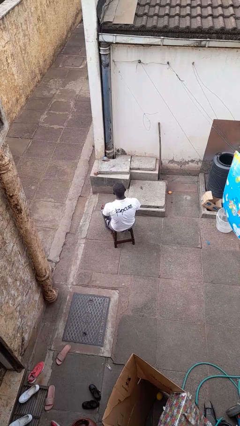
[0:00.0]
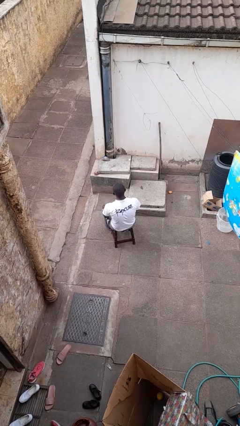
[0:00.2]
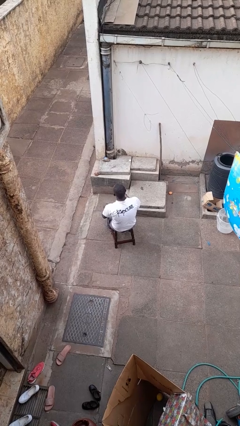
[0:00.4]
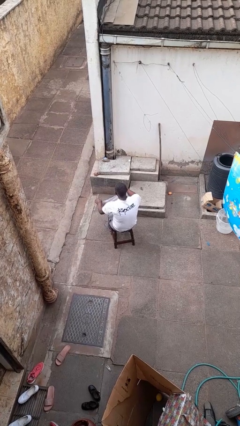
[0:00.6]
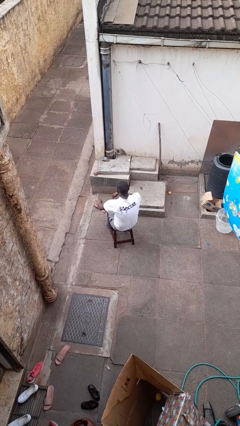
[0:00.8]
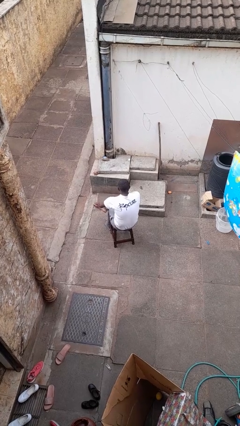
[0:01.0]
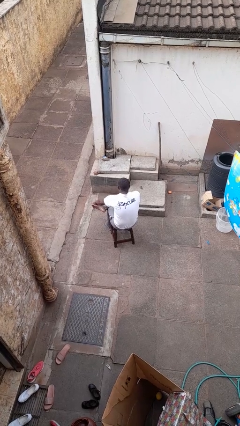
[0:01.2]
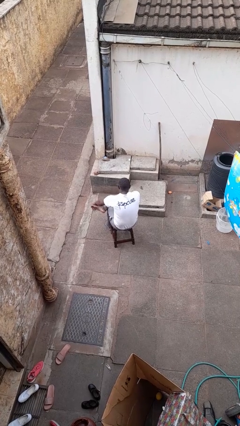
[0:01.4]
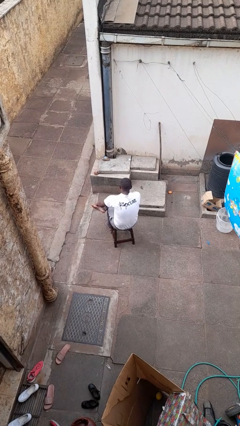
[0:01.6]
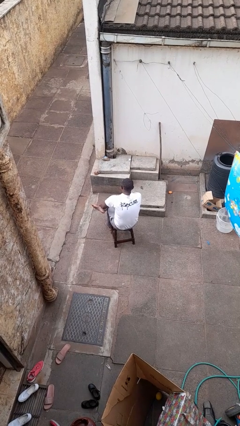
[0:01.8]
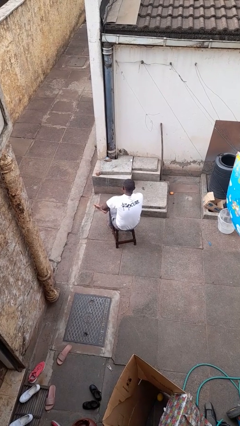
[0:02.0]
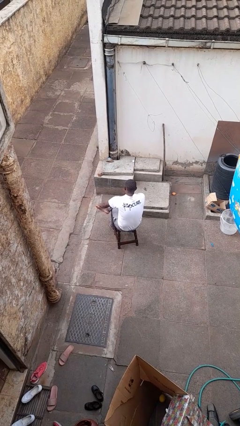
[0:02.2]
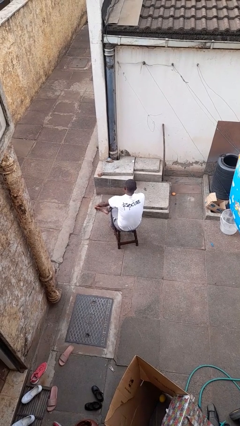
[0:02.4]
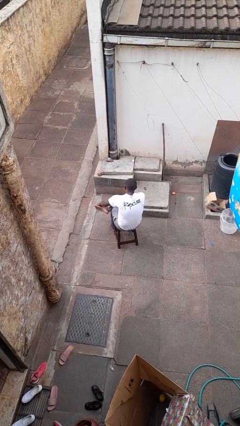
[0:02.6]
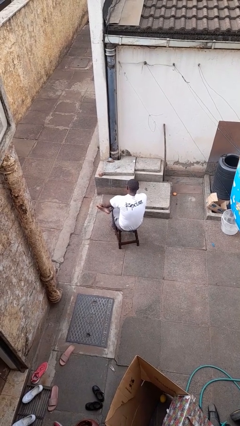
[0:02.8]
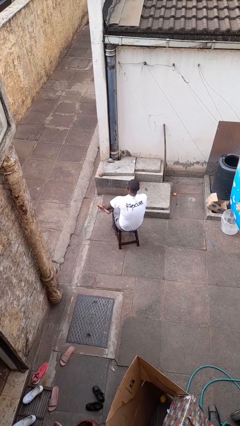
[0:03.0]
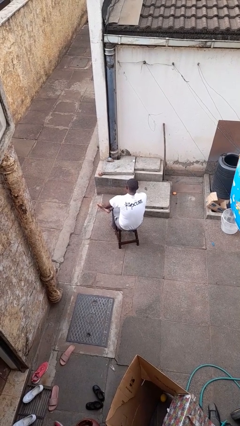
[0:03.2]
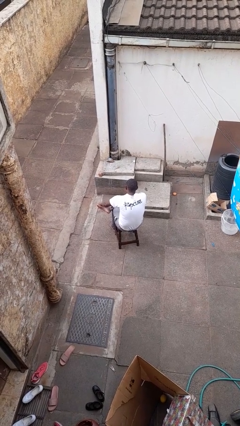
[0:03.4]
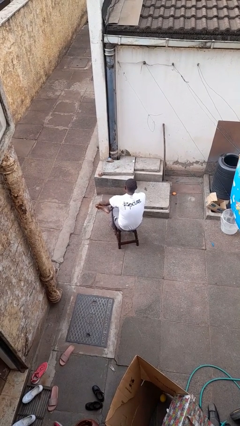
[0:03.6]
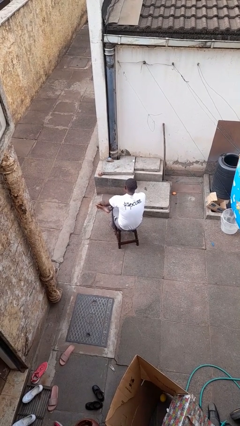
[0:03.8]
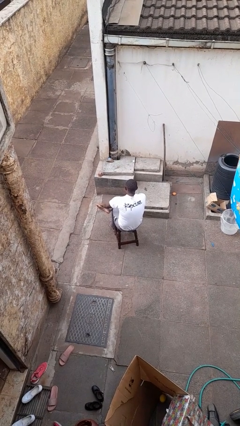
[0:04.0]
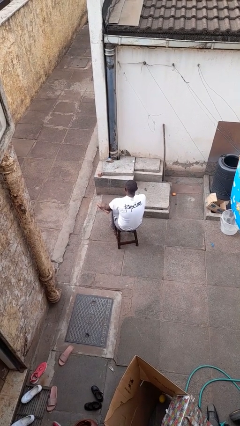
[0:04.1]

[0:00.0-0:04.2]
person rubs foot

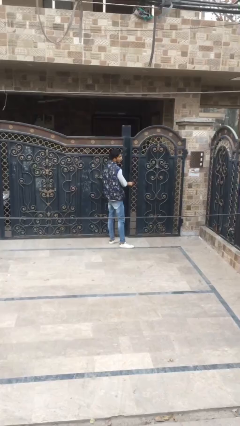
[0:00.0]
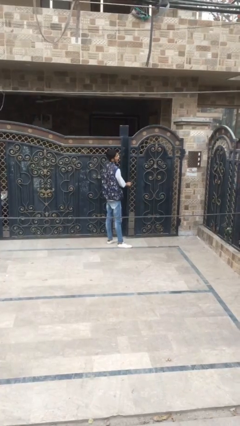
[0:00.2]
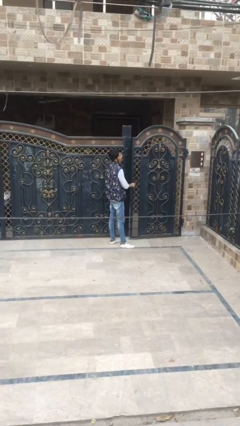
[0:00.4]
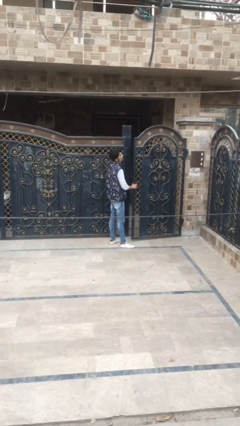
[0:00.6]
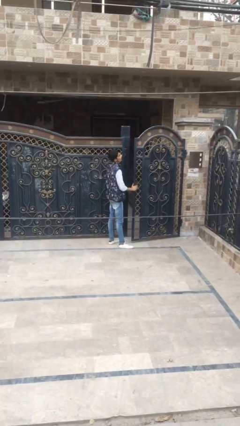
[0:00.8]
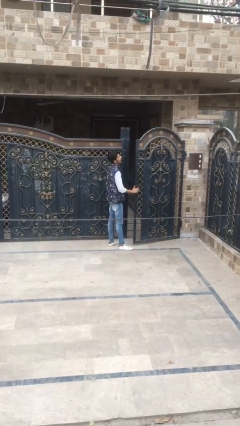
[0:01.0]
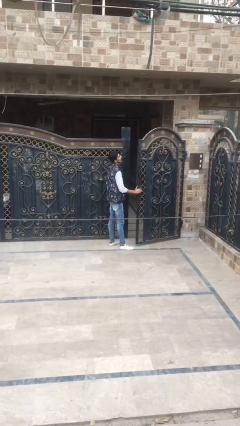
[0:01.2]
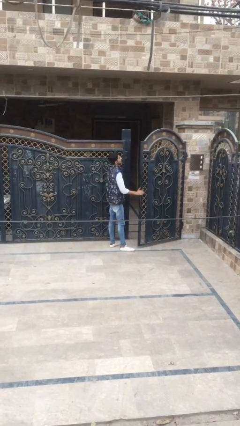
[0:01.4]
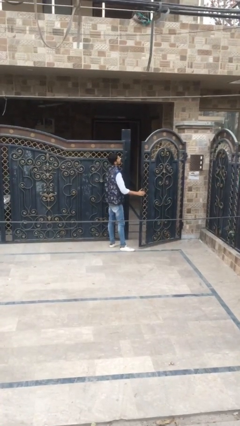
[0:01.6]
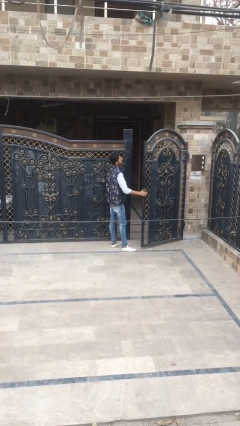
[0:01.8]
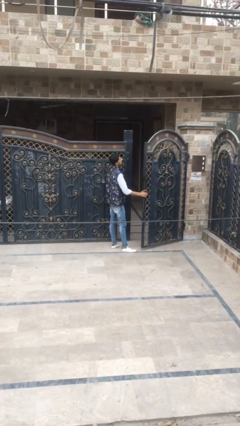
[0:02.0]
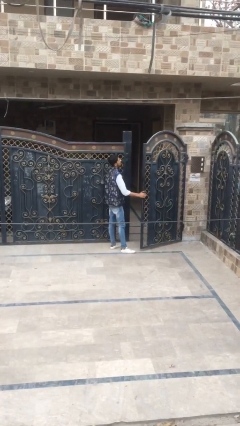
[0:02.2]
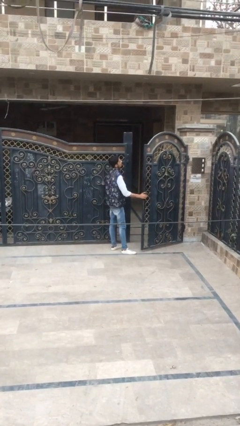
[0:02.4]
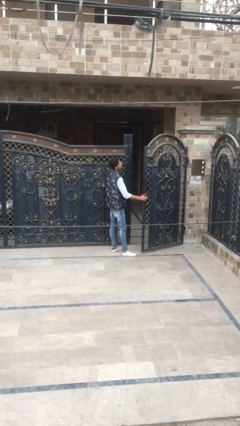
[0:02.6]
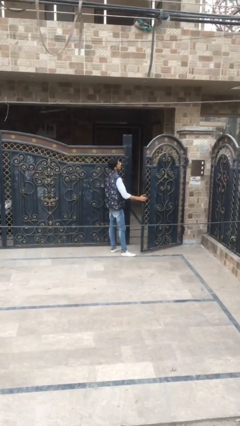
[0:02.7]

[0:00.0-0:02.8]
person opens facility door

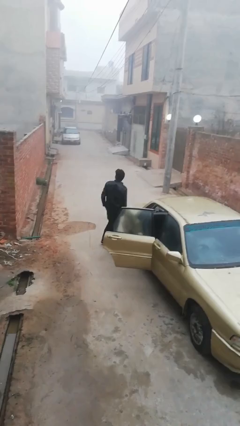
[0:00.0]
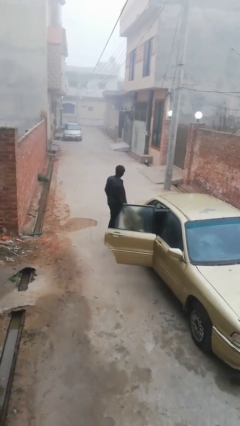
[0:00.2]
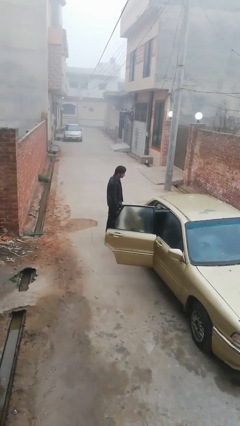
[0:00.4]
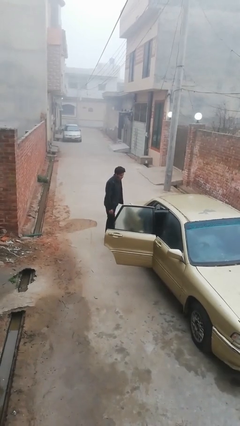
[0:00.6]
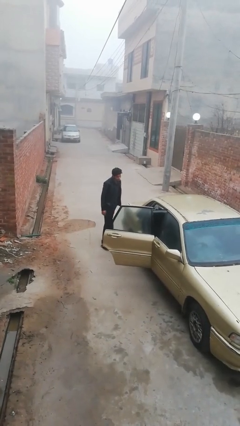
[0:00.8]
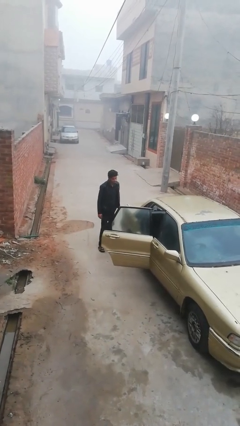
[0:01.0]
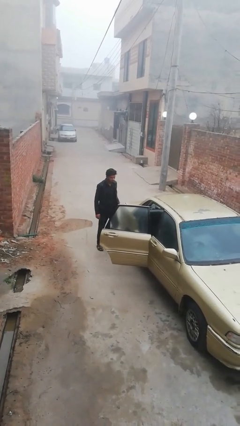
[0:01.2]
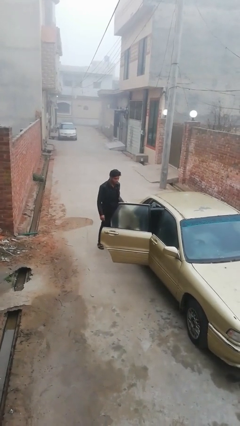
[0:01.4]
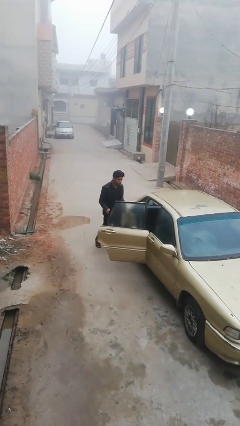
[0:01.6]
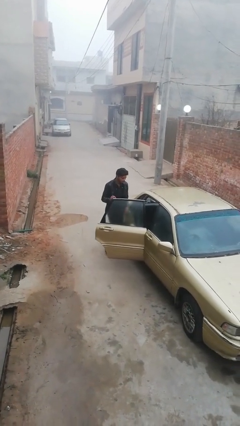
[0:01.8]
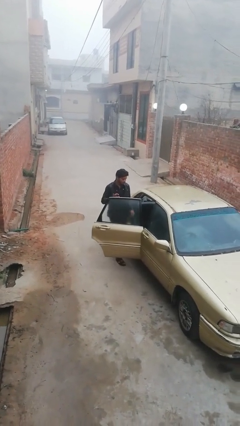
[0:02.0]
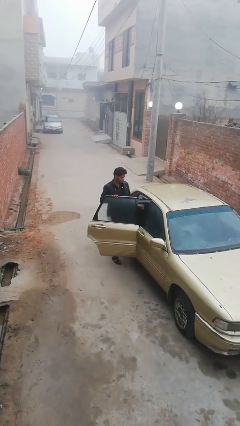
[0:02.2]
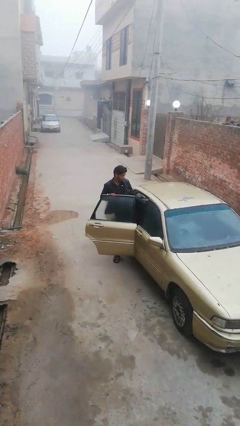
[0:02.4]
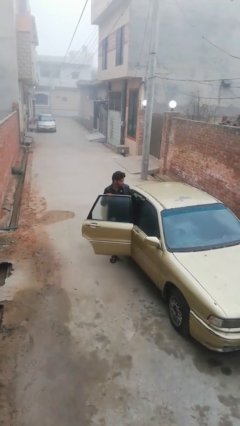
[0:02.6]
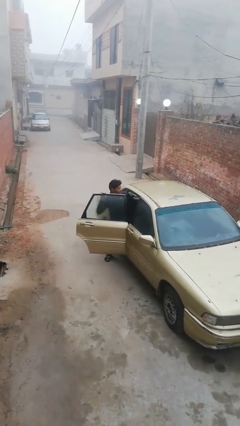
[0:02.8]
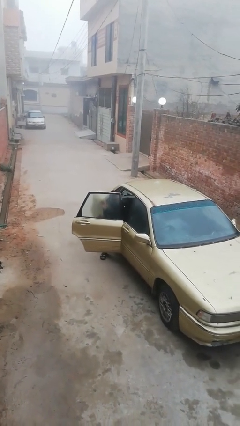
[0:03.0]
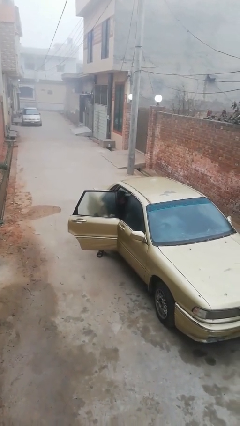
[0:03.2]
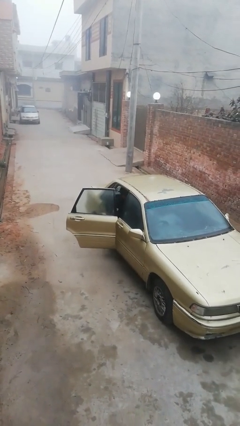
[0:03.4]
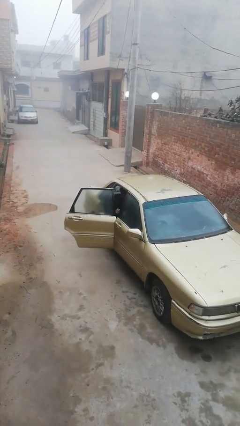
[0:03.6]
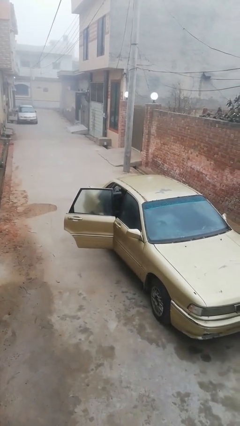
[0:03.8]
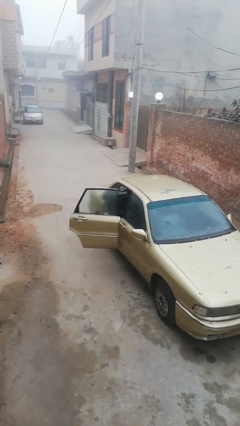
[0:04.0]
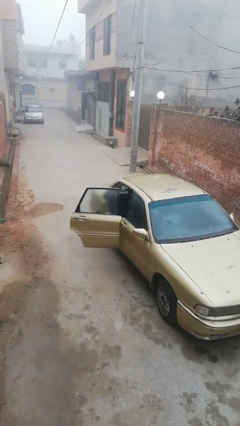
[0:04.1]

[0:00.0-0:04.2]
person enters car

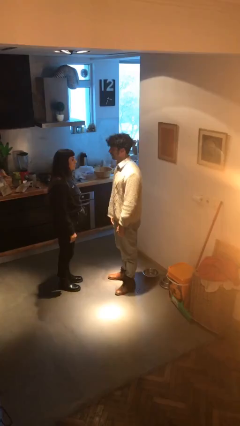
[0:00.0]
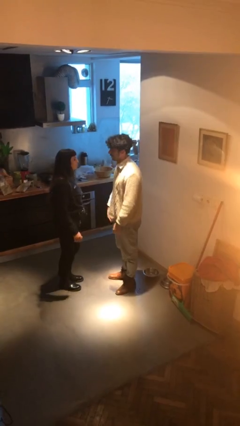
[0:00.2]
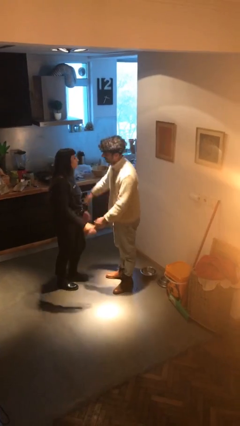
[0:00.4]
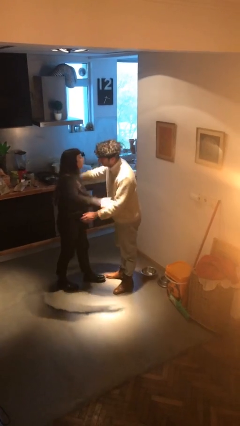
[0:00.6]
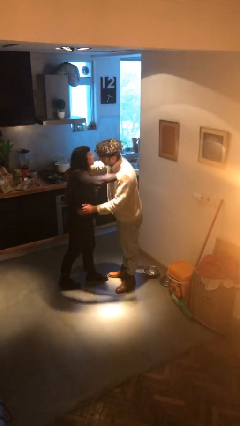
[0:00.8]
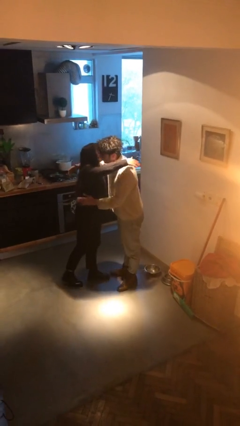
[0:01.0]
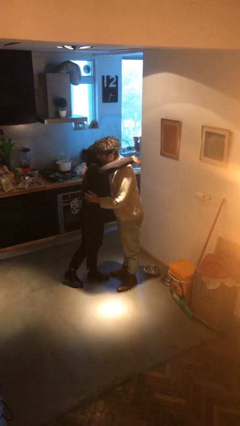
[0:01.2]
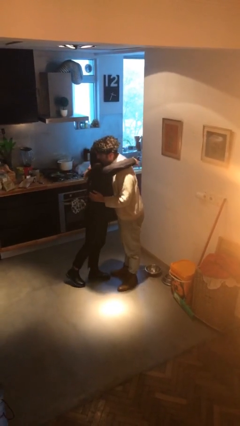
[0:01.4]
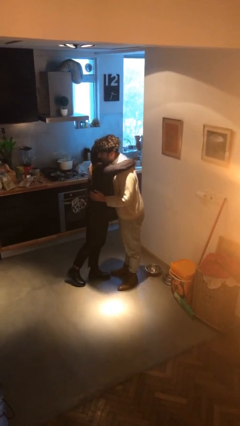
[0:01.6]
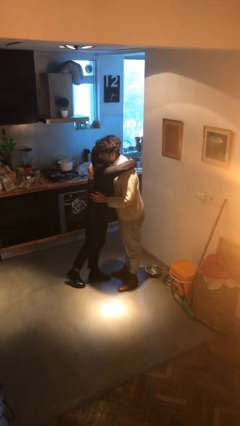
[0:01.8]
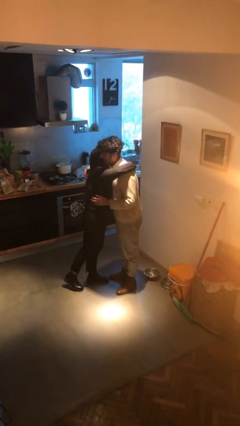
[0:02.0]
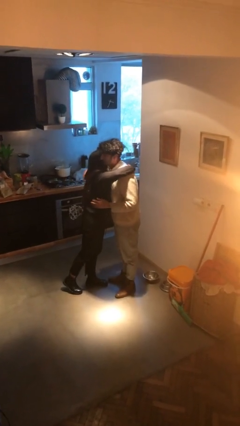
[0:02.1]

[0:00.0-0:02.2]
person embraces person

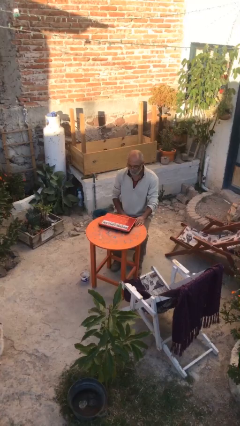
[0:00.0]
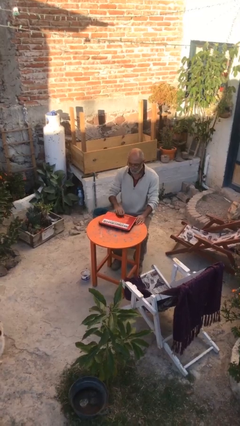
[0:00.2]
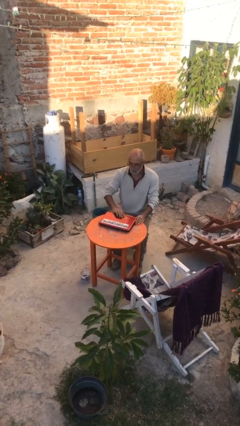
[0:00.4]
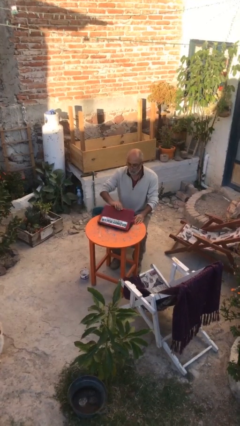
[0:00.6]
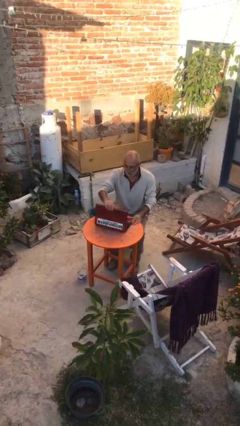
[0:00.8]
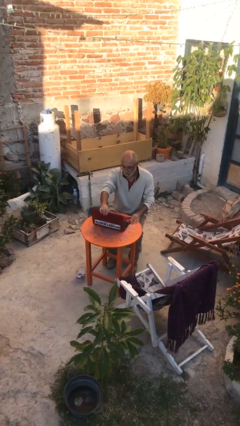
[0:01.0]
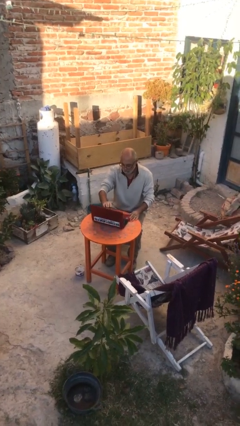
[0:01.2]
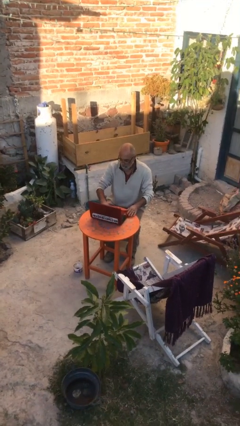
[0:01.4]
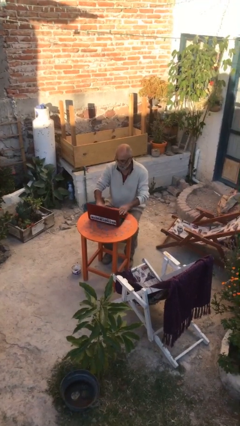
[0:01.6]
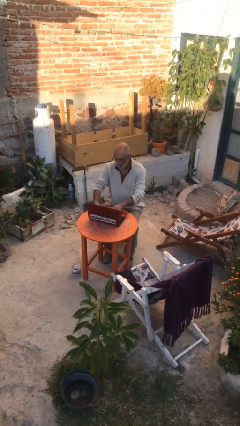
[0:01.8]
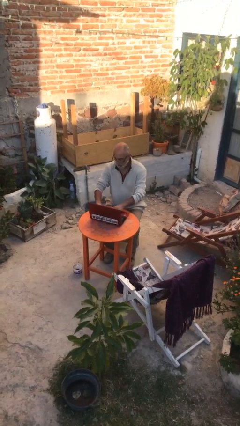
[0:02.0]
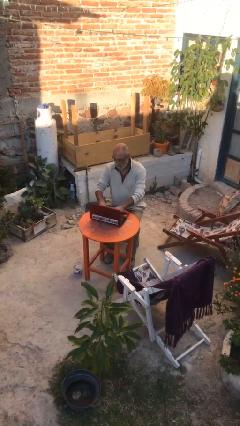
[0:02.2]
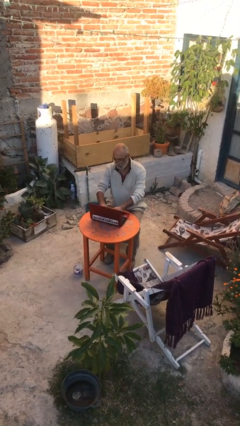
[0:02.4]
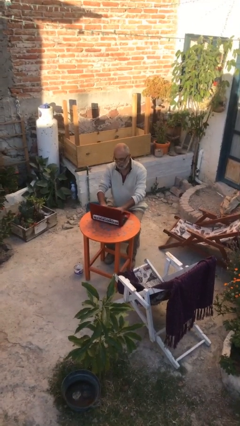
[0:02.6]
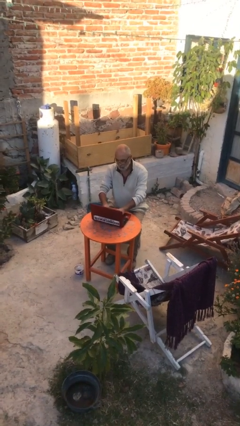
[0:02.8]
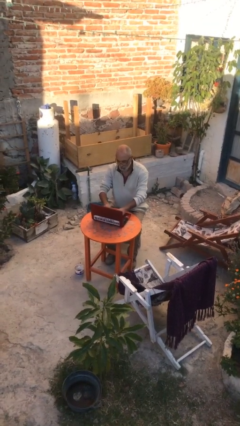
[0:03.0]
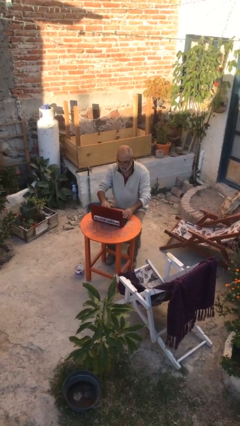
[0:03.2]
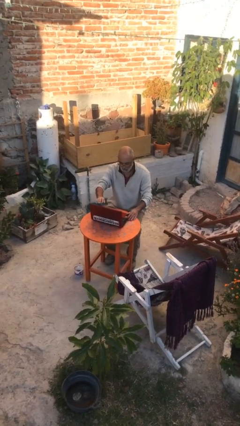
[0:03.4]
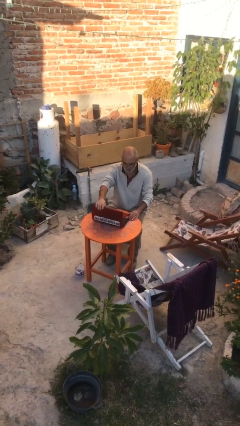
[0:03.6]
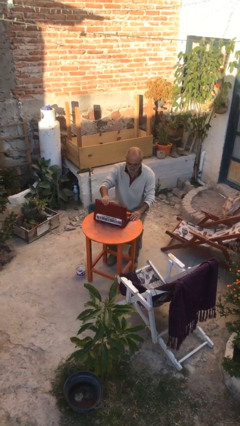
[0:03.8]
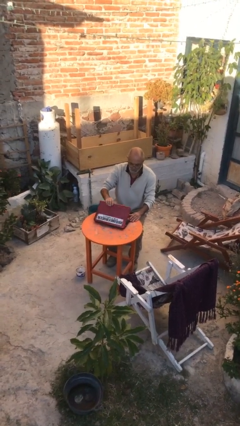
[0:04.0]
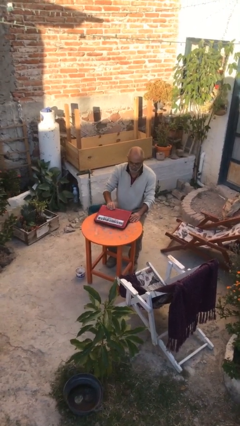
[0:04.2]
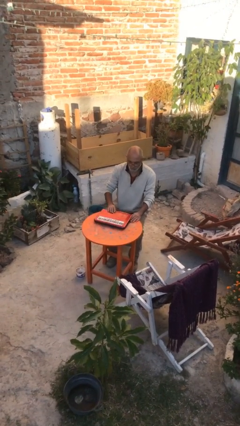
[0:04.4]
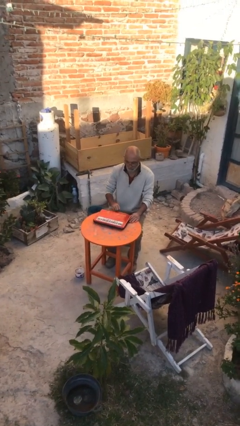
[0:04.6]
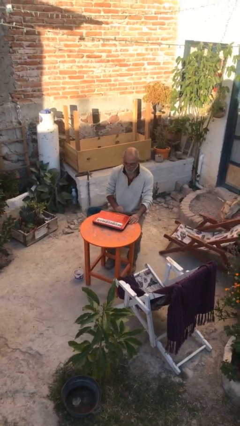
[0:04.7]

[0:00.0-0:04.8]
person interacts with laptop
